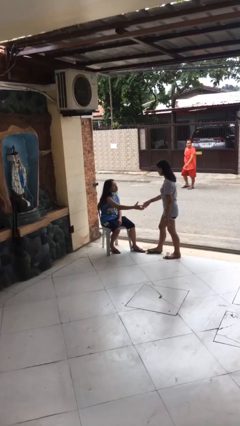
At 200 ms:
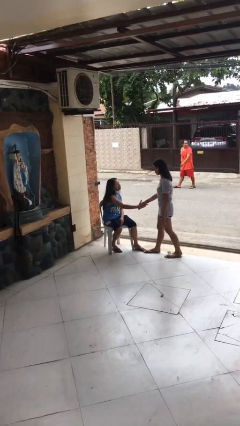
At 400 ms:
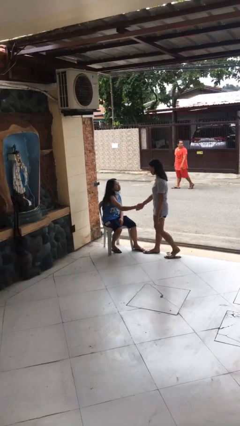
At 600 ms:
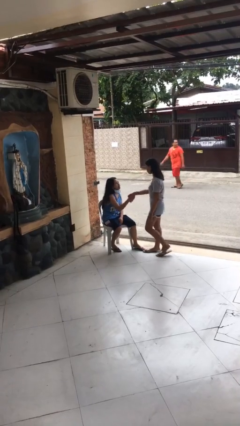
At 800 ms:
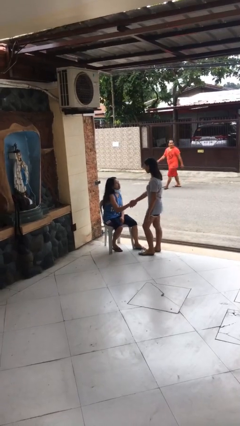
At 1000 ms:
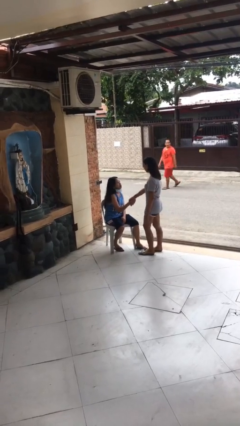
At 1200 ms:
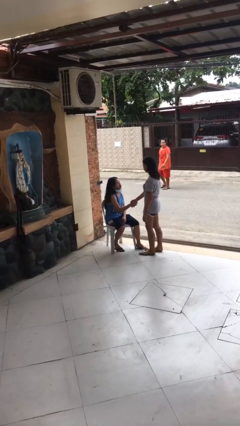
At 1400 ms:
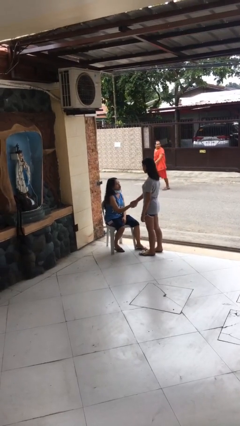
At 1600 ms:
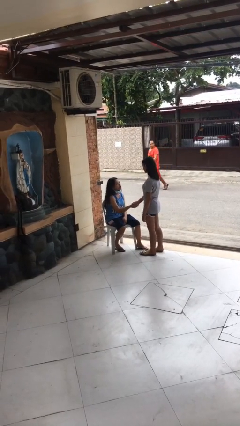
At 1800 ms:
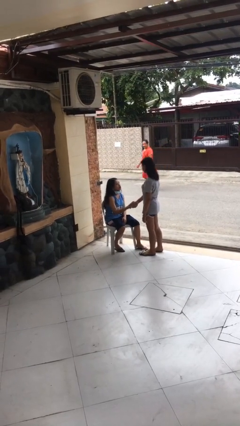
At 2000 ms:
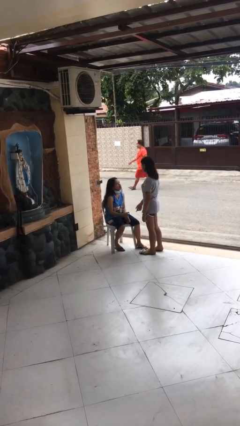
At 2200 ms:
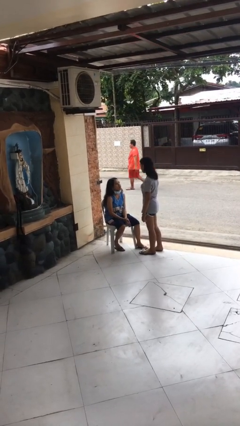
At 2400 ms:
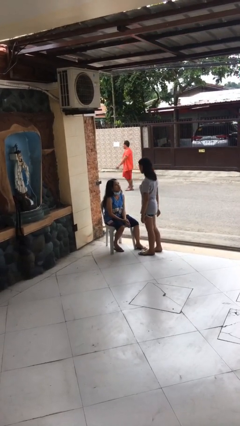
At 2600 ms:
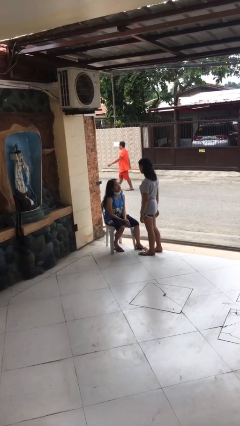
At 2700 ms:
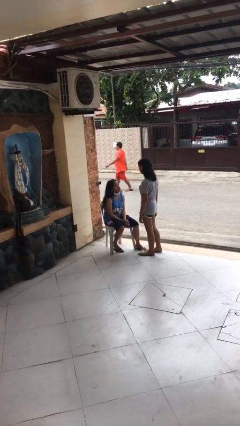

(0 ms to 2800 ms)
person shakes hand

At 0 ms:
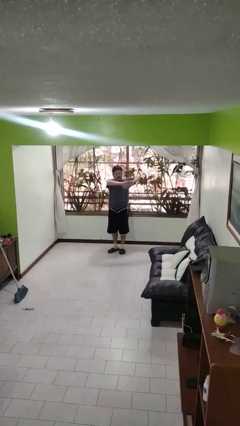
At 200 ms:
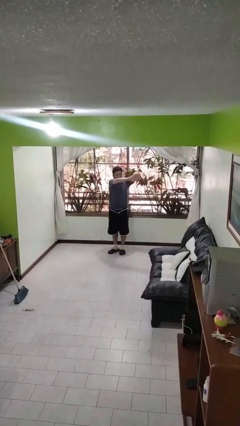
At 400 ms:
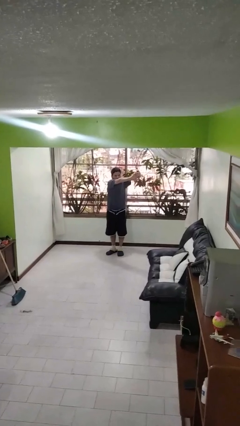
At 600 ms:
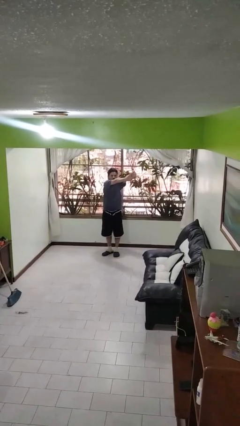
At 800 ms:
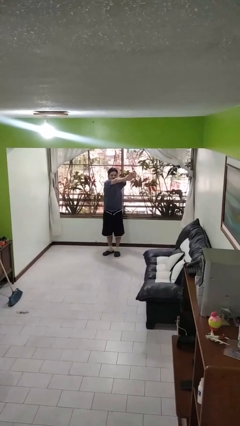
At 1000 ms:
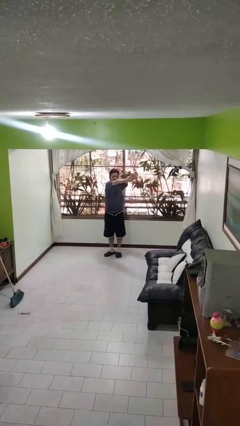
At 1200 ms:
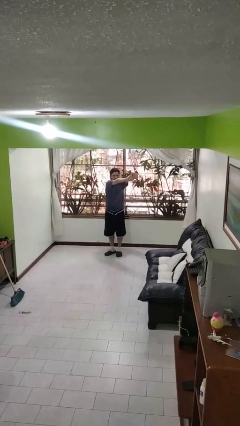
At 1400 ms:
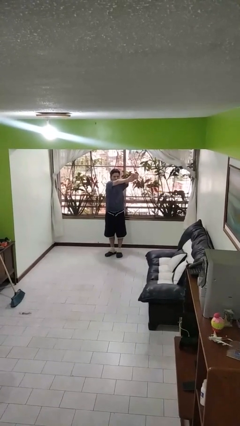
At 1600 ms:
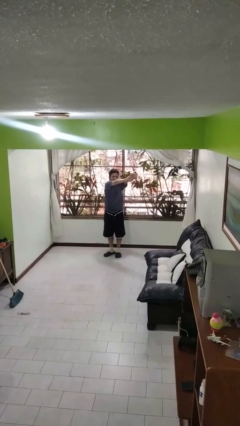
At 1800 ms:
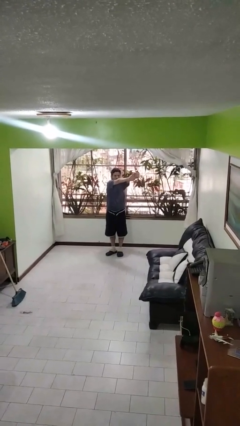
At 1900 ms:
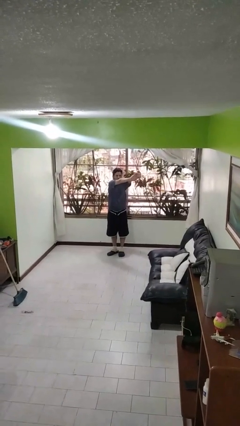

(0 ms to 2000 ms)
person stretches arms to side

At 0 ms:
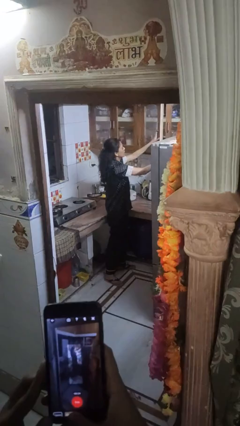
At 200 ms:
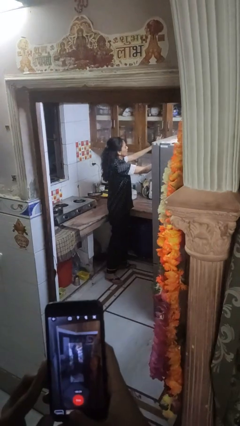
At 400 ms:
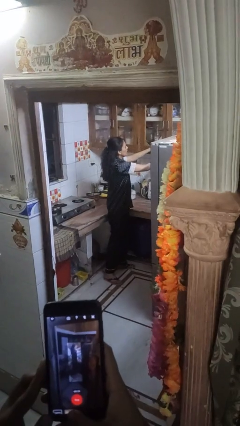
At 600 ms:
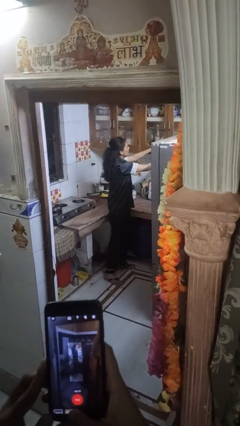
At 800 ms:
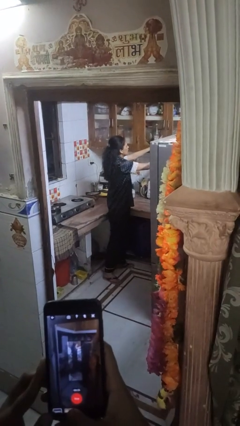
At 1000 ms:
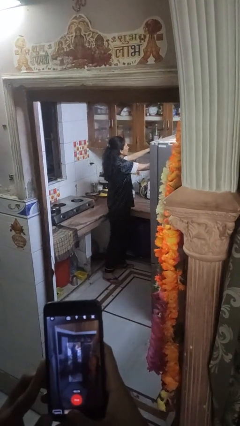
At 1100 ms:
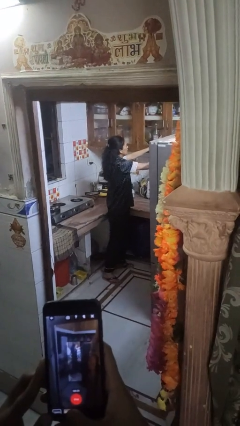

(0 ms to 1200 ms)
person closes cabinet

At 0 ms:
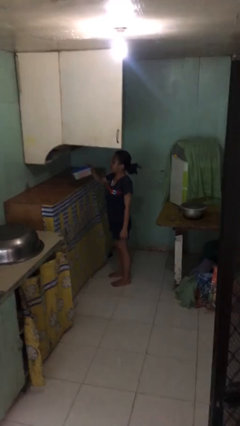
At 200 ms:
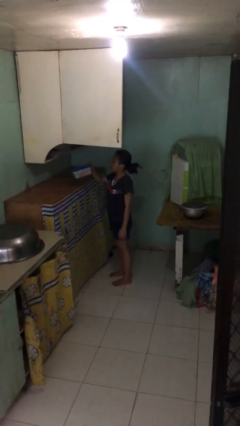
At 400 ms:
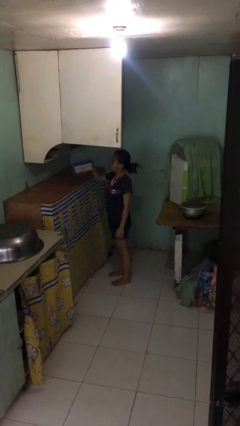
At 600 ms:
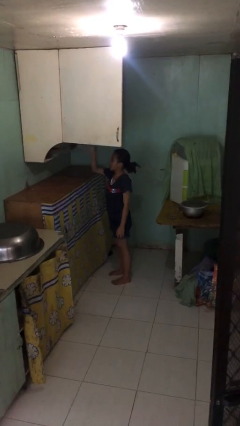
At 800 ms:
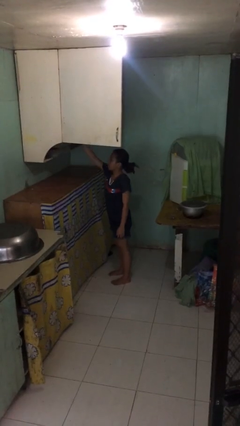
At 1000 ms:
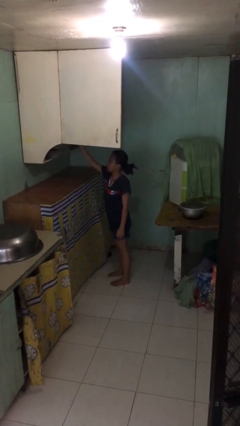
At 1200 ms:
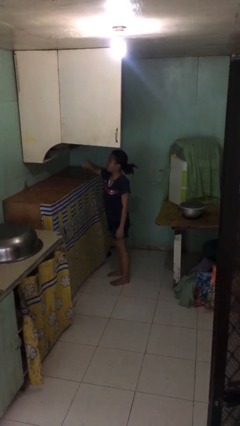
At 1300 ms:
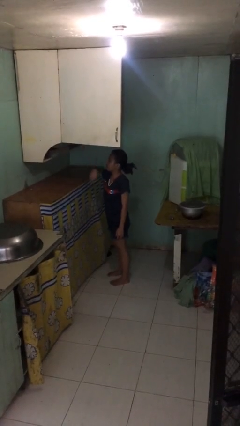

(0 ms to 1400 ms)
person puts down object on shelf

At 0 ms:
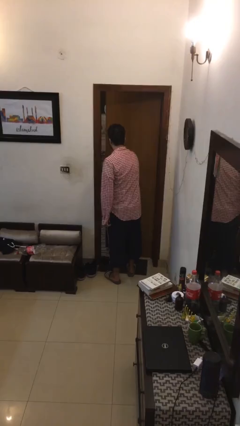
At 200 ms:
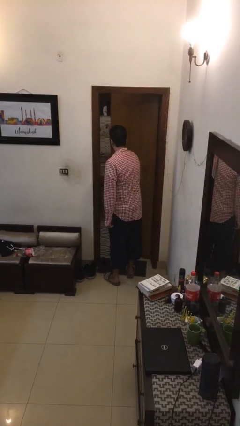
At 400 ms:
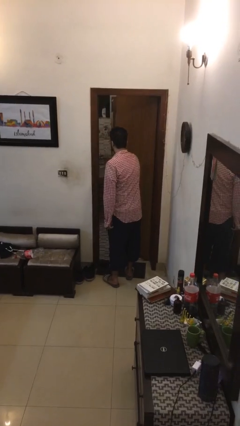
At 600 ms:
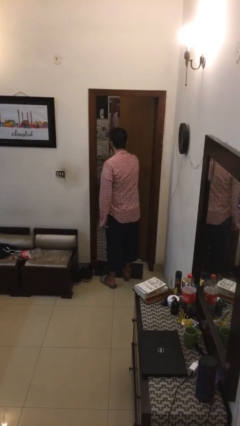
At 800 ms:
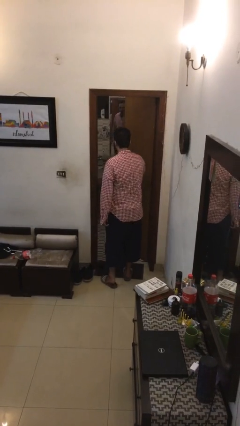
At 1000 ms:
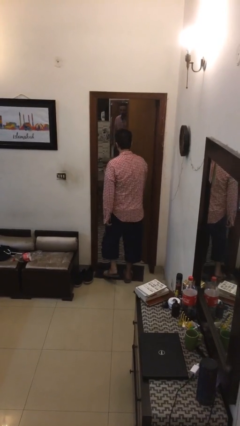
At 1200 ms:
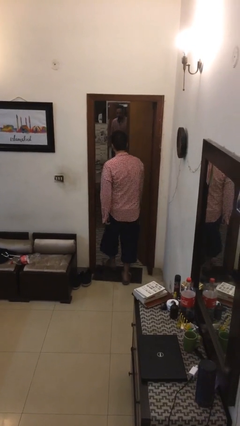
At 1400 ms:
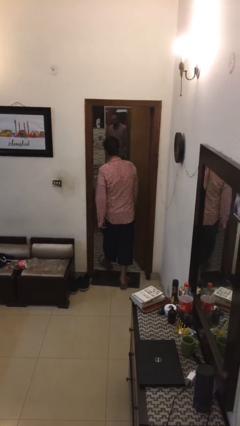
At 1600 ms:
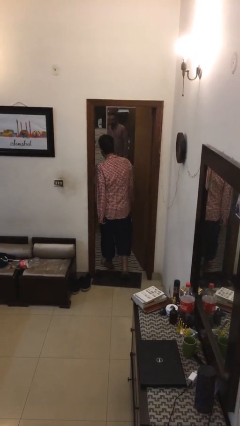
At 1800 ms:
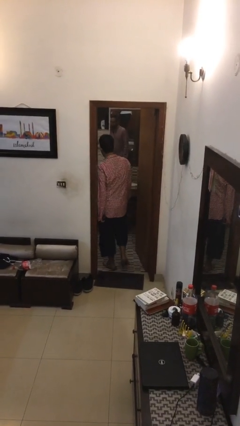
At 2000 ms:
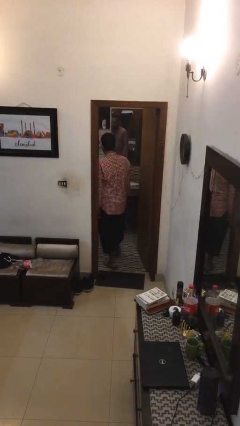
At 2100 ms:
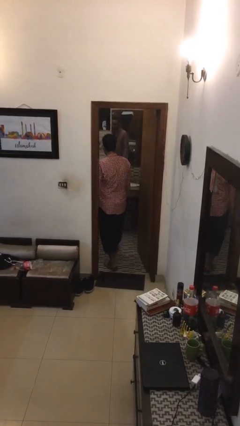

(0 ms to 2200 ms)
person exits scene through structure

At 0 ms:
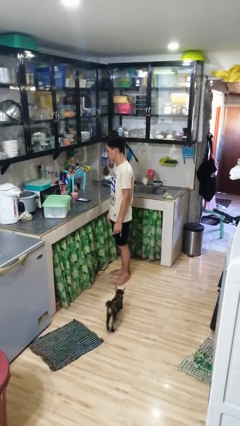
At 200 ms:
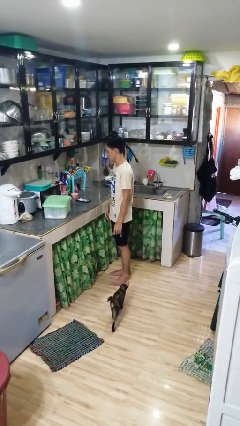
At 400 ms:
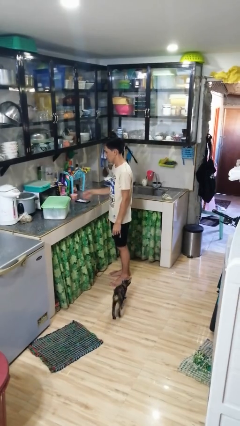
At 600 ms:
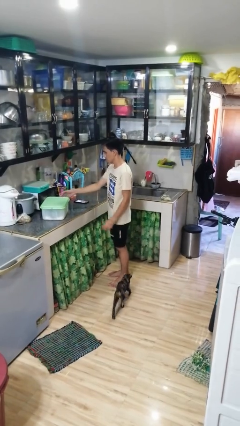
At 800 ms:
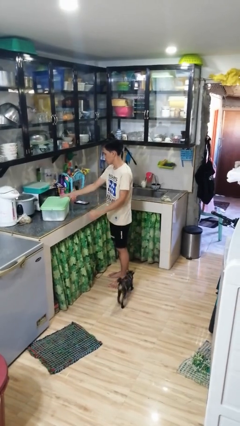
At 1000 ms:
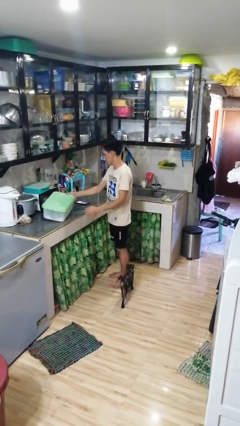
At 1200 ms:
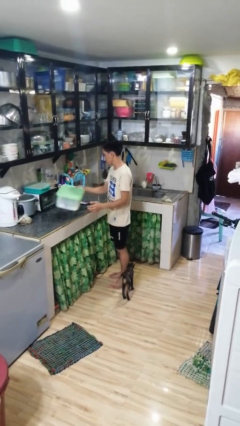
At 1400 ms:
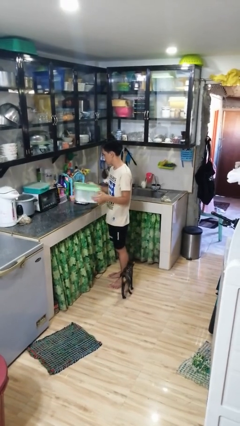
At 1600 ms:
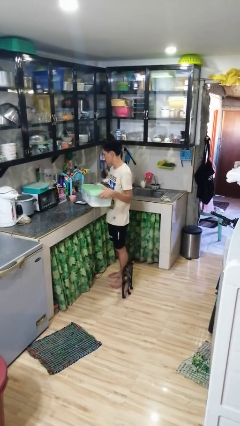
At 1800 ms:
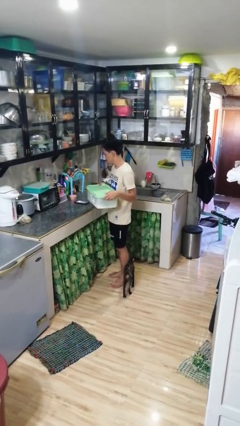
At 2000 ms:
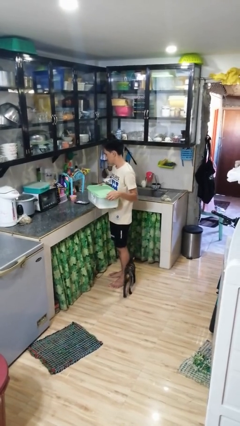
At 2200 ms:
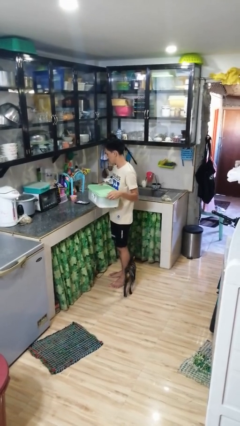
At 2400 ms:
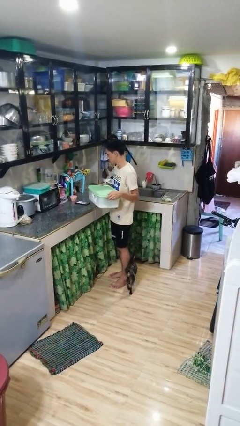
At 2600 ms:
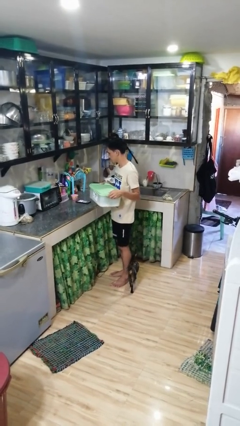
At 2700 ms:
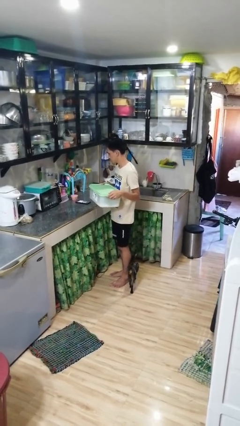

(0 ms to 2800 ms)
person picks up object from countertop

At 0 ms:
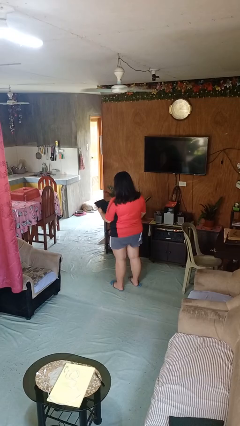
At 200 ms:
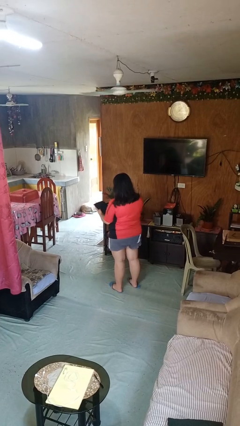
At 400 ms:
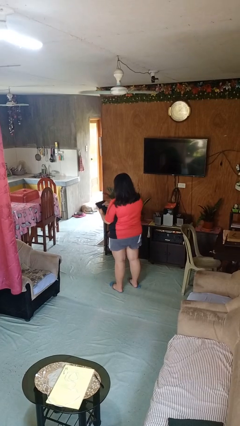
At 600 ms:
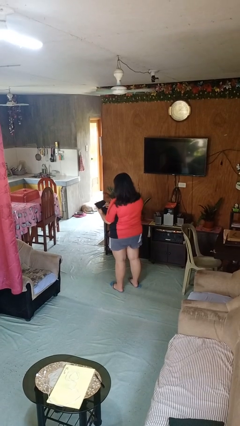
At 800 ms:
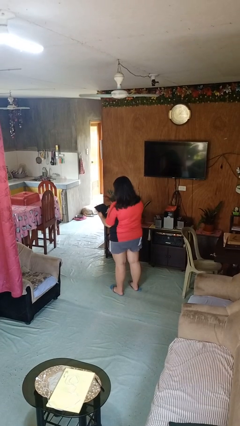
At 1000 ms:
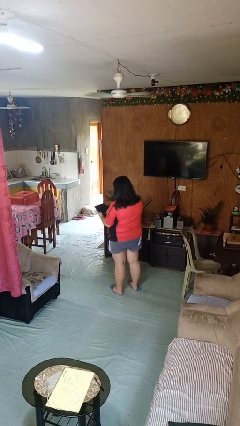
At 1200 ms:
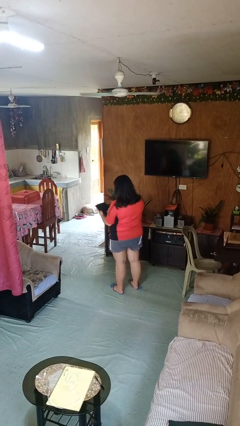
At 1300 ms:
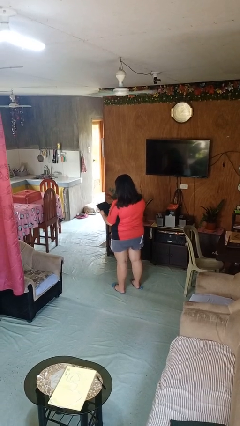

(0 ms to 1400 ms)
person interacts with tablet

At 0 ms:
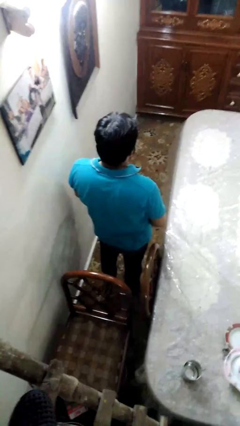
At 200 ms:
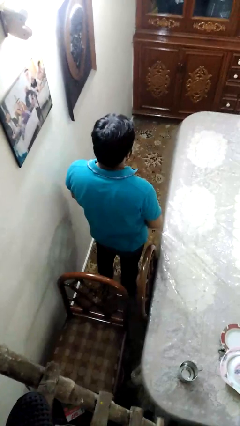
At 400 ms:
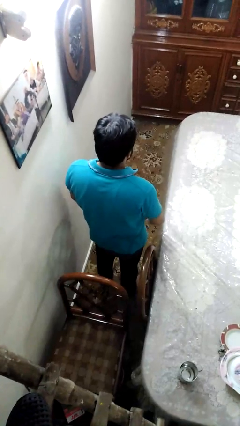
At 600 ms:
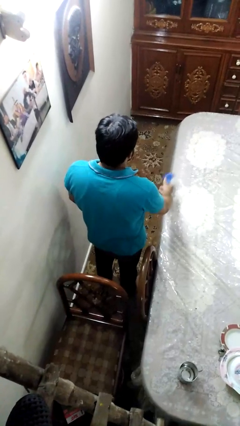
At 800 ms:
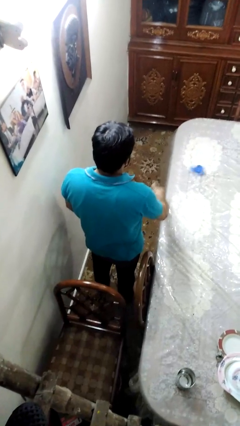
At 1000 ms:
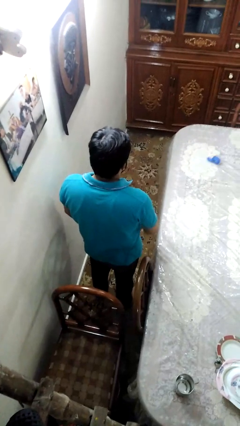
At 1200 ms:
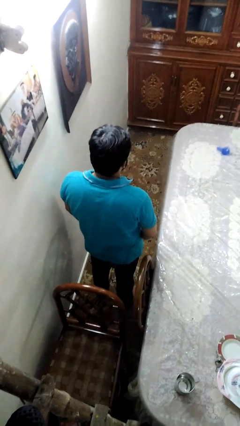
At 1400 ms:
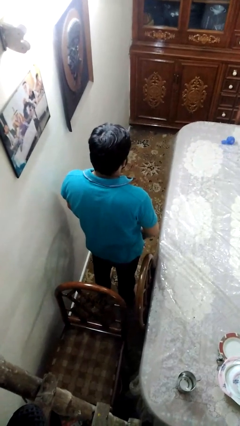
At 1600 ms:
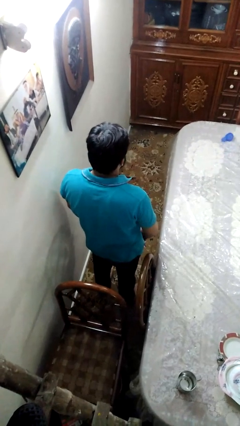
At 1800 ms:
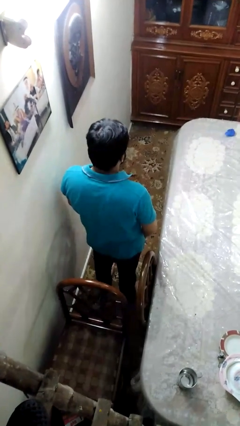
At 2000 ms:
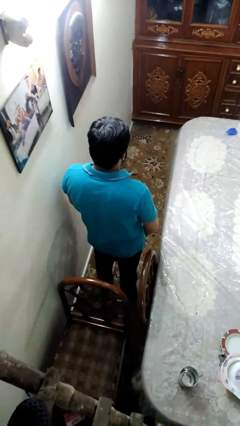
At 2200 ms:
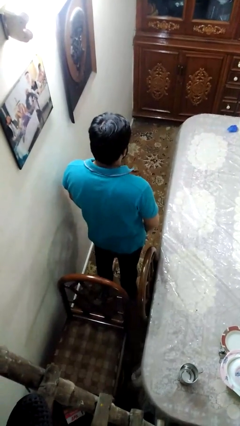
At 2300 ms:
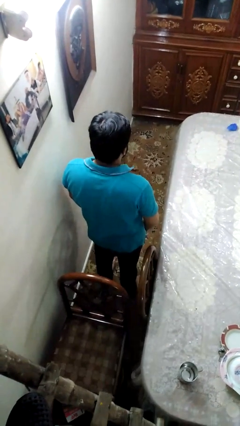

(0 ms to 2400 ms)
person throws object on table

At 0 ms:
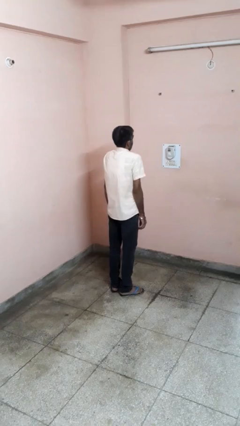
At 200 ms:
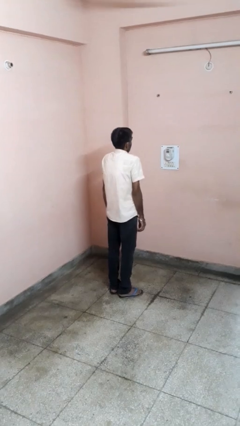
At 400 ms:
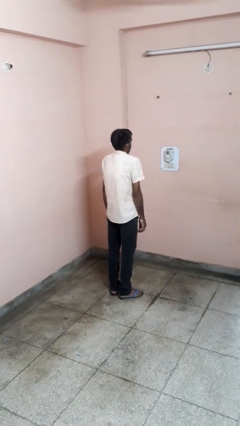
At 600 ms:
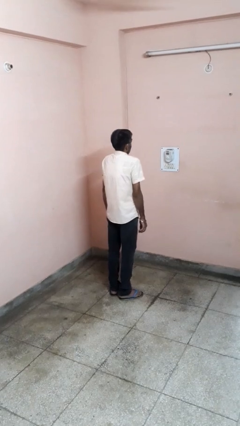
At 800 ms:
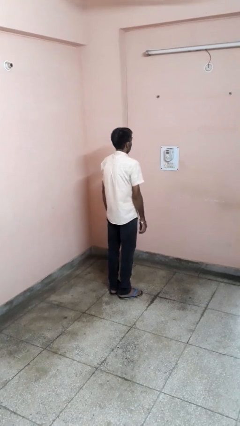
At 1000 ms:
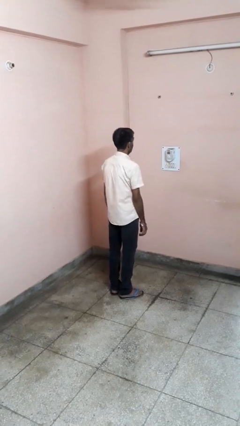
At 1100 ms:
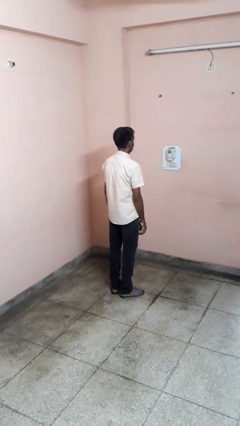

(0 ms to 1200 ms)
person shrugs
